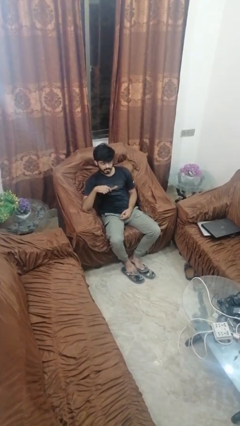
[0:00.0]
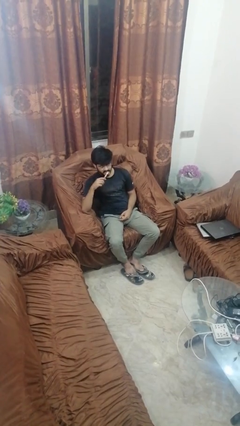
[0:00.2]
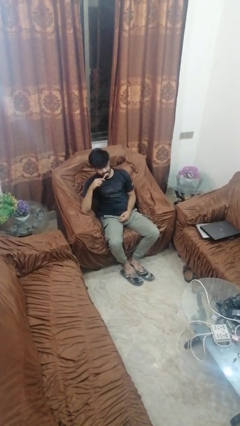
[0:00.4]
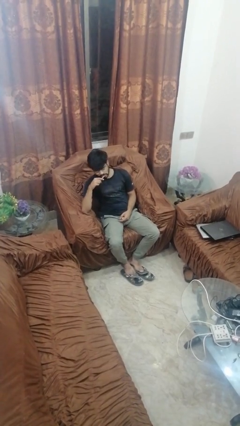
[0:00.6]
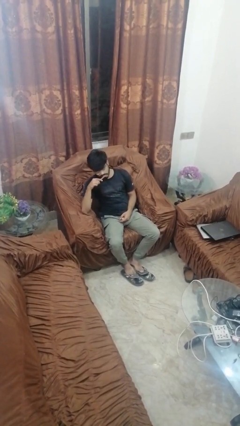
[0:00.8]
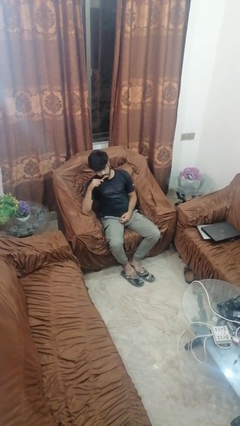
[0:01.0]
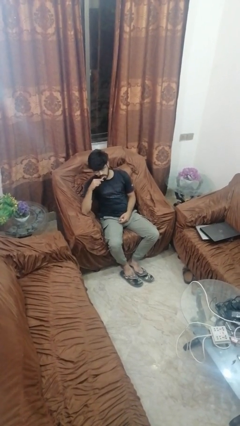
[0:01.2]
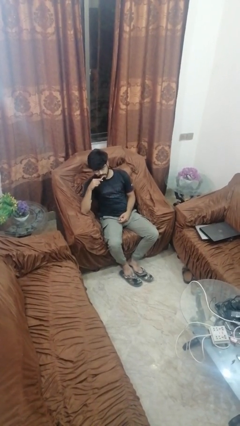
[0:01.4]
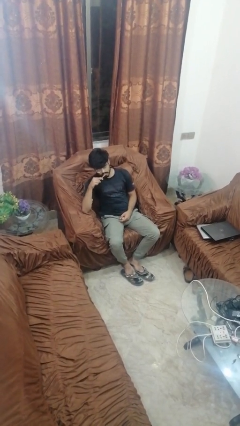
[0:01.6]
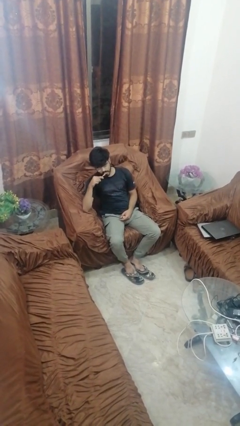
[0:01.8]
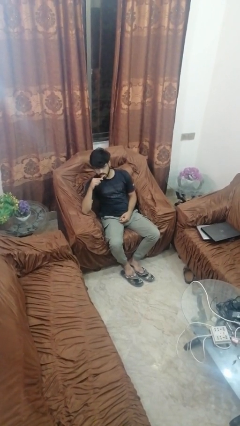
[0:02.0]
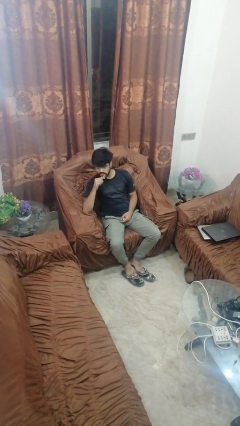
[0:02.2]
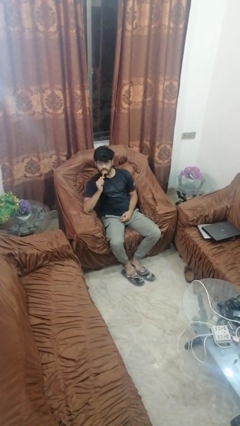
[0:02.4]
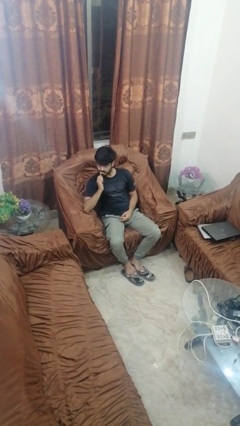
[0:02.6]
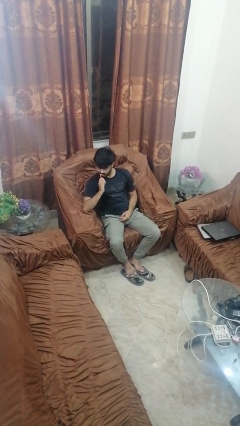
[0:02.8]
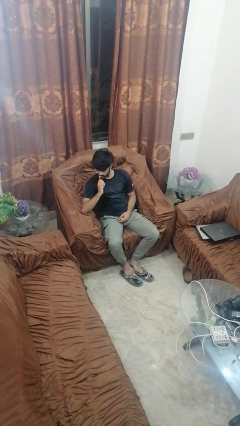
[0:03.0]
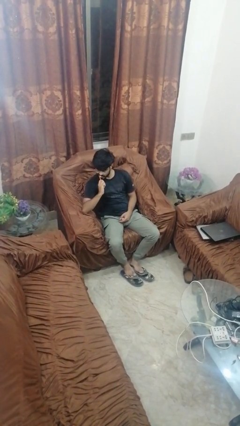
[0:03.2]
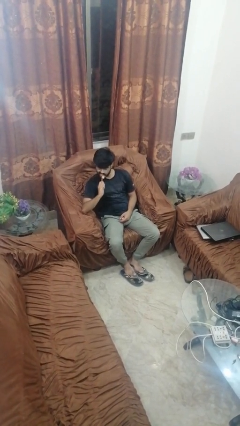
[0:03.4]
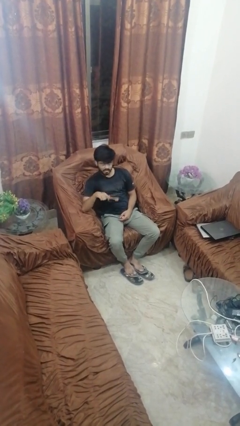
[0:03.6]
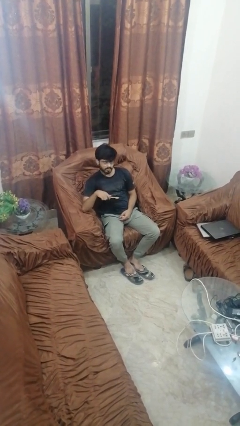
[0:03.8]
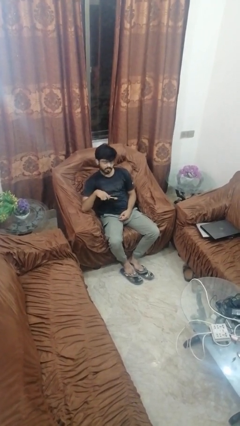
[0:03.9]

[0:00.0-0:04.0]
person brushes teeth

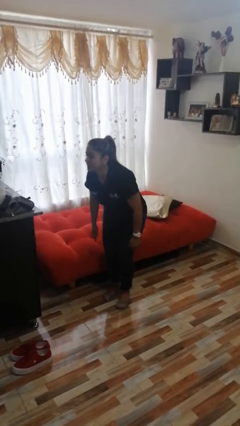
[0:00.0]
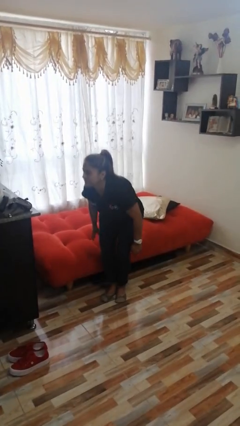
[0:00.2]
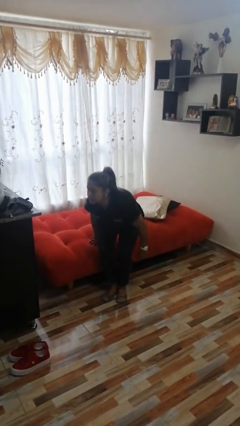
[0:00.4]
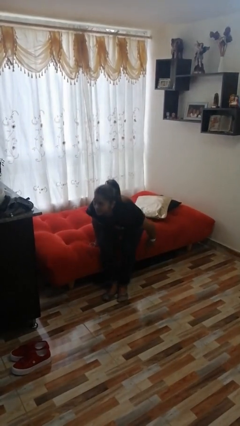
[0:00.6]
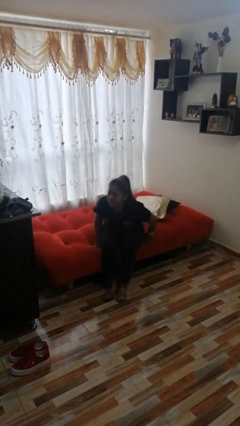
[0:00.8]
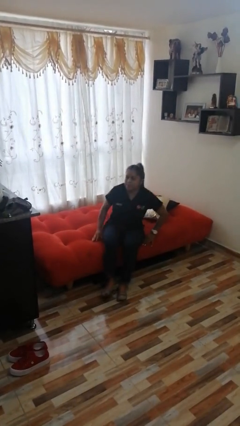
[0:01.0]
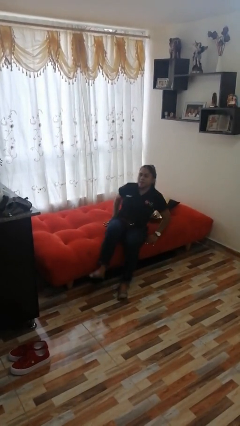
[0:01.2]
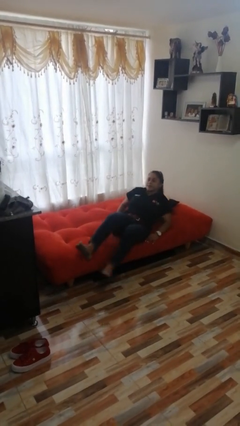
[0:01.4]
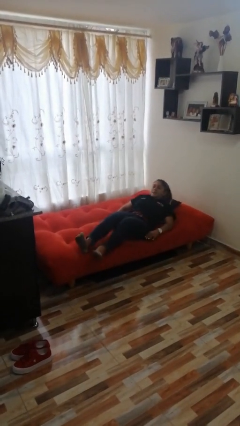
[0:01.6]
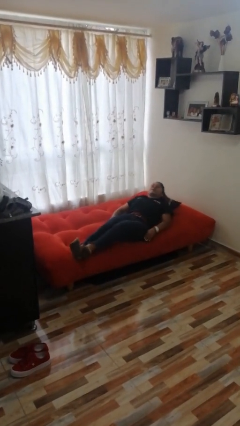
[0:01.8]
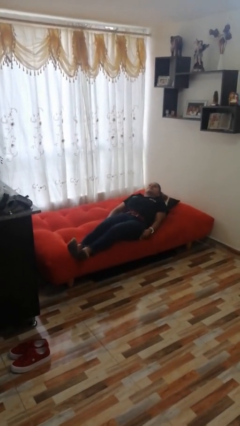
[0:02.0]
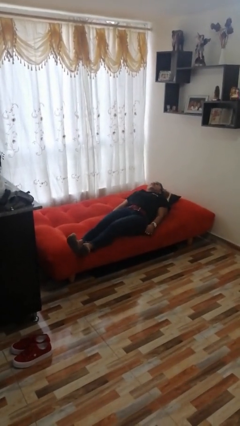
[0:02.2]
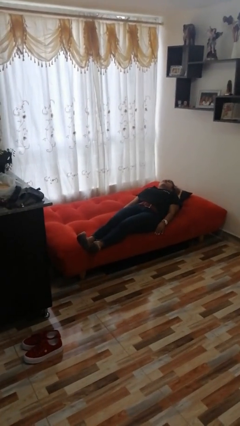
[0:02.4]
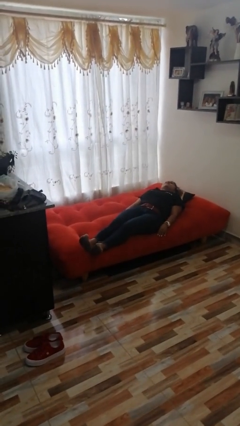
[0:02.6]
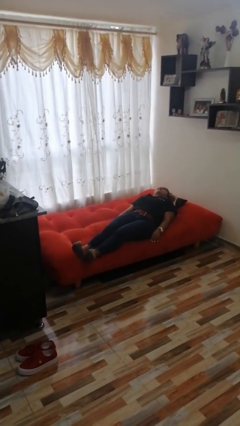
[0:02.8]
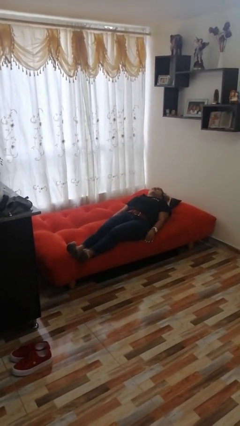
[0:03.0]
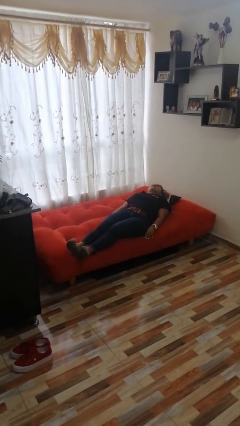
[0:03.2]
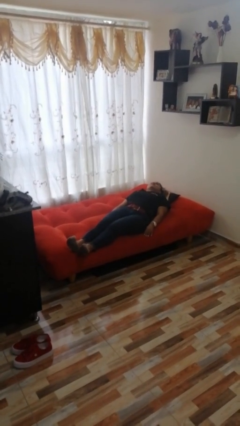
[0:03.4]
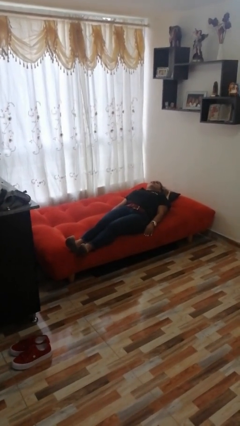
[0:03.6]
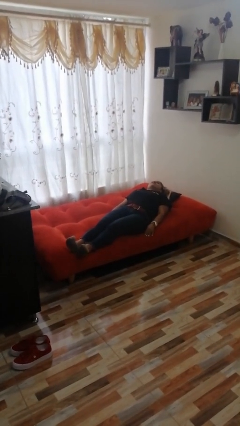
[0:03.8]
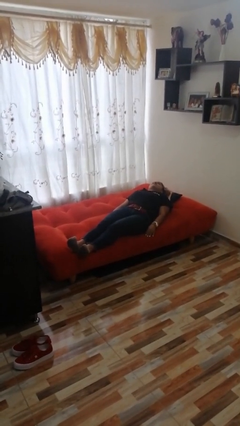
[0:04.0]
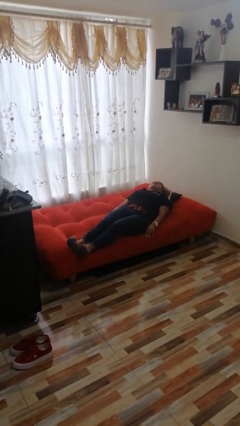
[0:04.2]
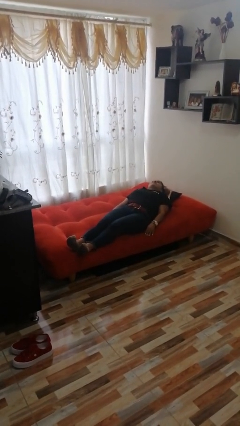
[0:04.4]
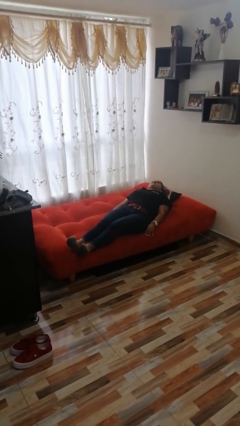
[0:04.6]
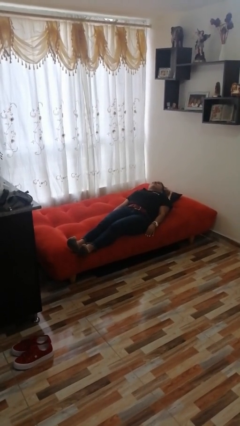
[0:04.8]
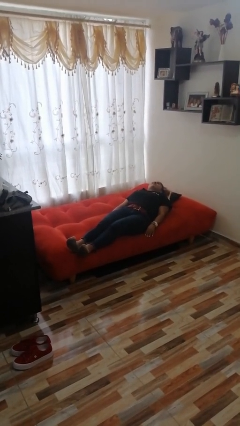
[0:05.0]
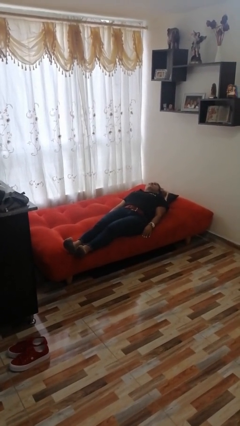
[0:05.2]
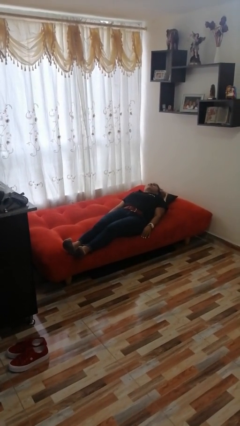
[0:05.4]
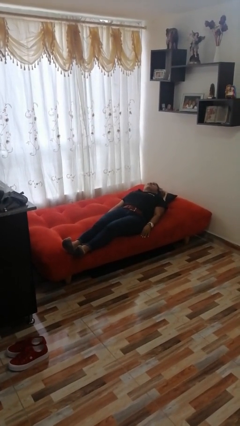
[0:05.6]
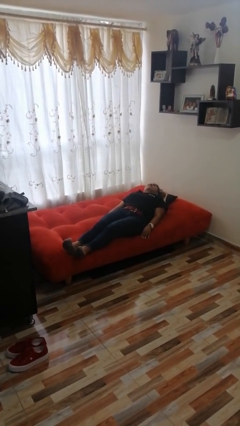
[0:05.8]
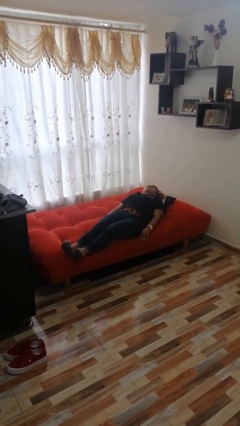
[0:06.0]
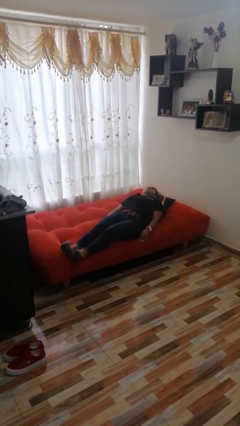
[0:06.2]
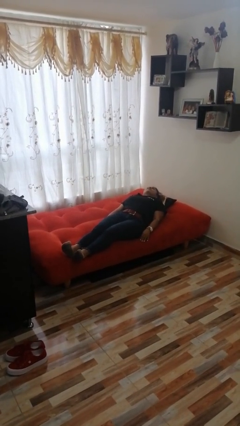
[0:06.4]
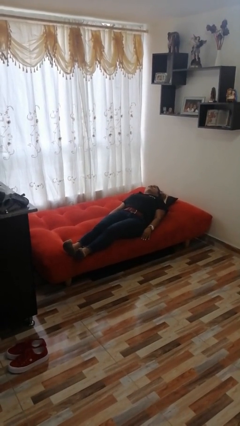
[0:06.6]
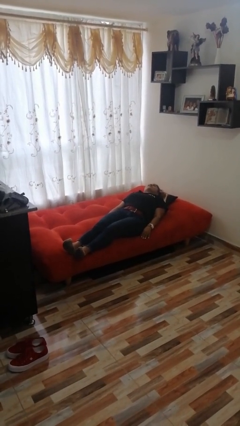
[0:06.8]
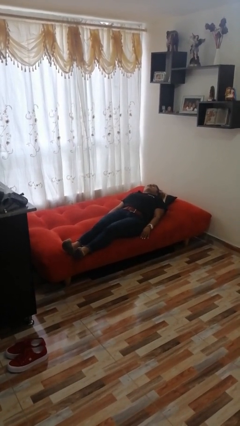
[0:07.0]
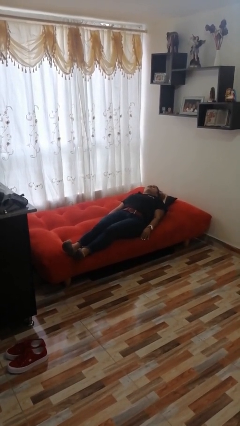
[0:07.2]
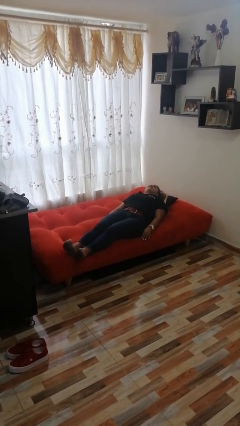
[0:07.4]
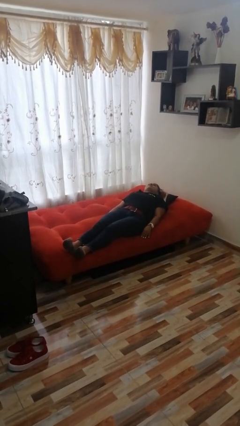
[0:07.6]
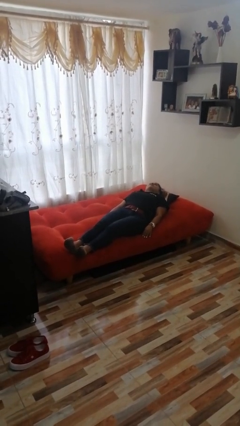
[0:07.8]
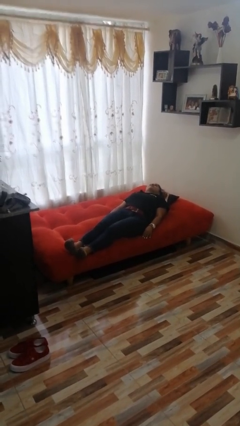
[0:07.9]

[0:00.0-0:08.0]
person lies down on bed

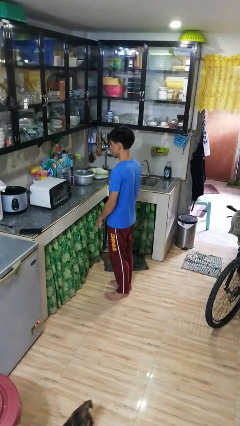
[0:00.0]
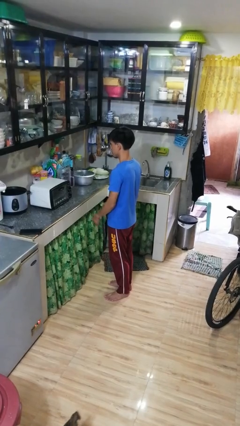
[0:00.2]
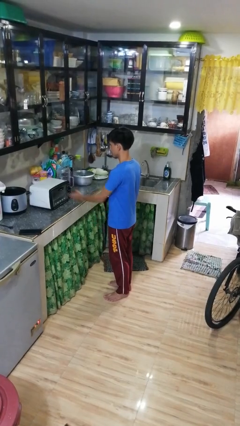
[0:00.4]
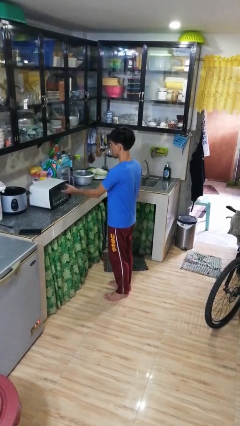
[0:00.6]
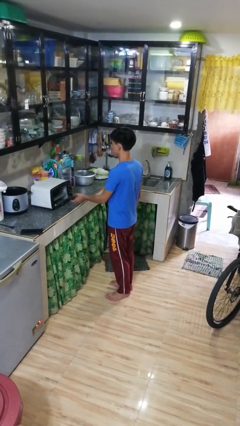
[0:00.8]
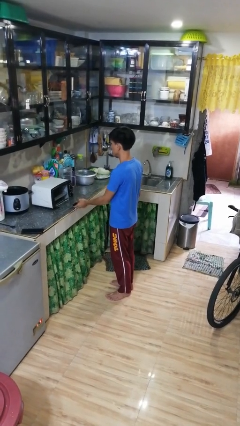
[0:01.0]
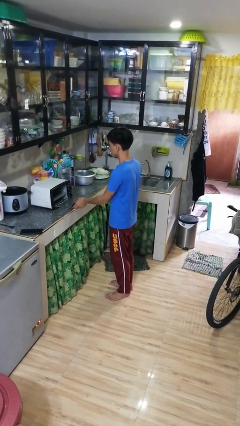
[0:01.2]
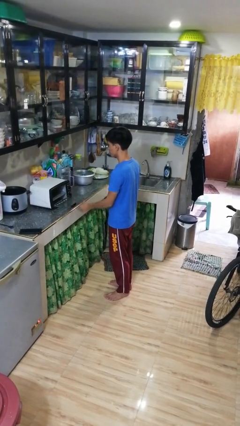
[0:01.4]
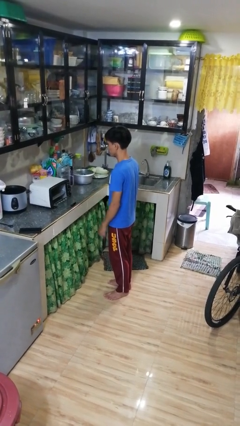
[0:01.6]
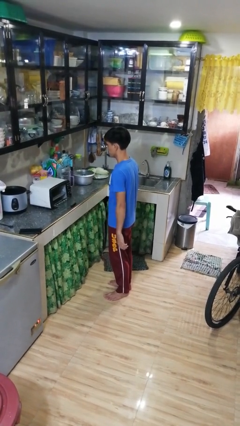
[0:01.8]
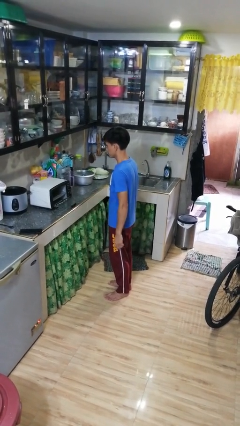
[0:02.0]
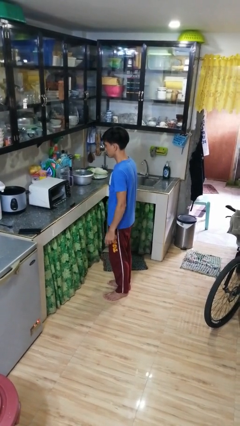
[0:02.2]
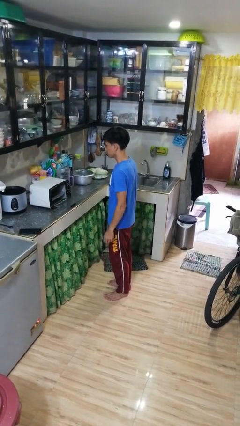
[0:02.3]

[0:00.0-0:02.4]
person opens microwave

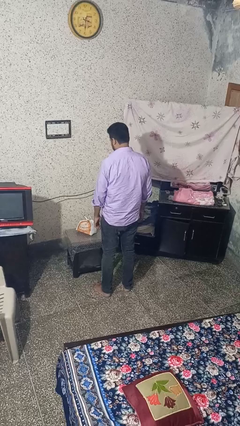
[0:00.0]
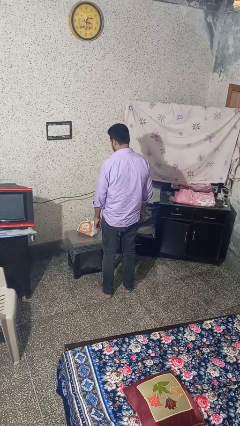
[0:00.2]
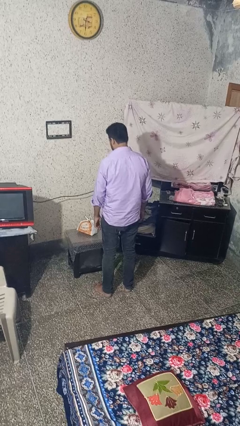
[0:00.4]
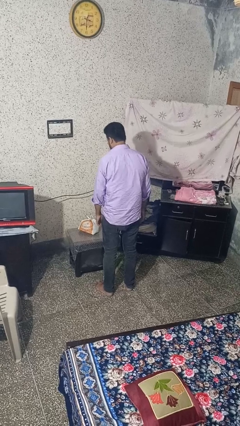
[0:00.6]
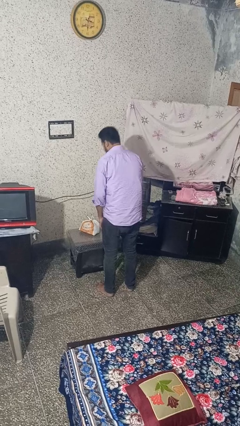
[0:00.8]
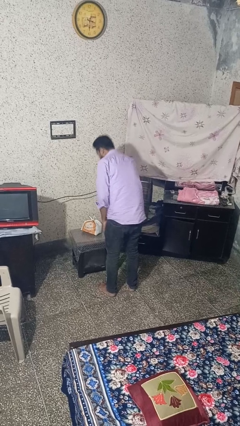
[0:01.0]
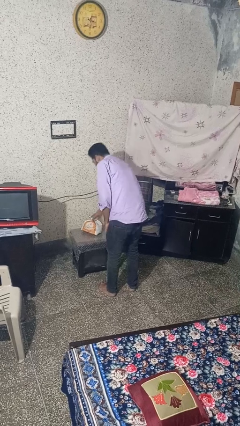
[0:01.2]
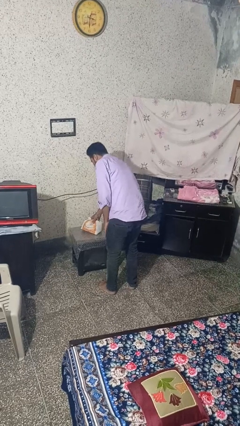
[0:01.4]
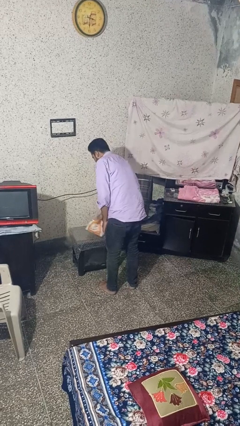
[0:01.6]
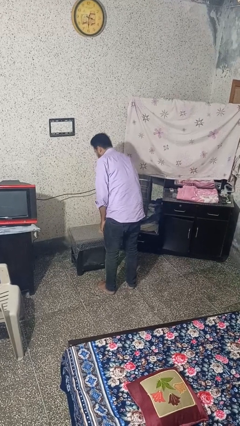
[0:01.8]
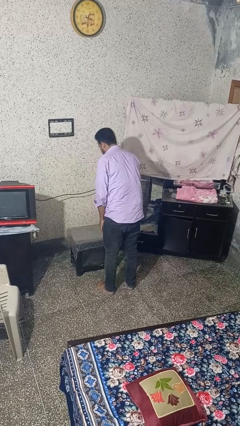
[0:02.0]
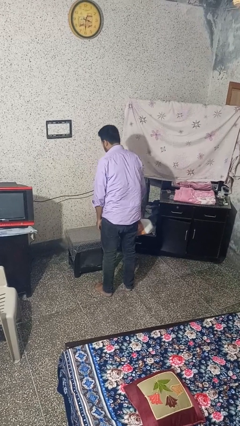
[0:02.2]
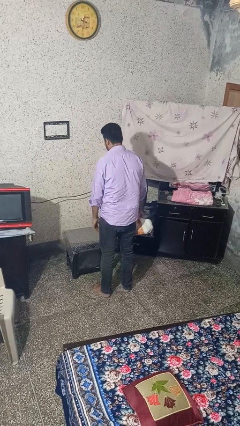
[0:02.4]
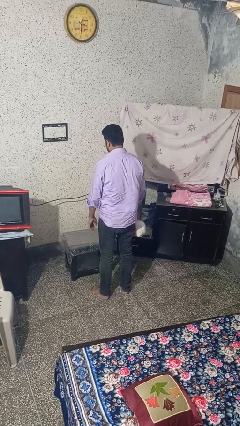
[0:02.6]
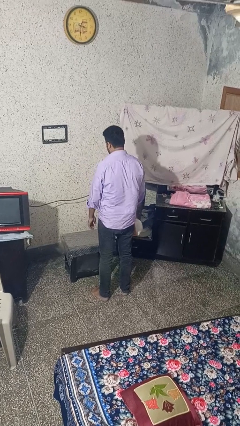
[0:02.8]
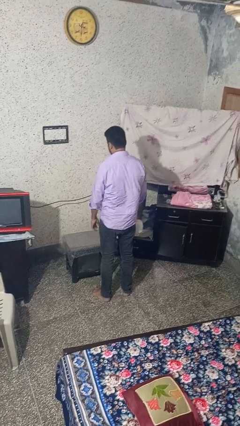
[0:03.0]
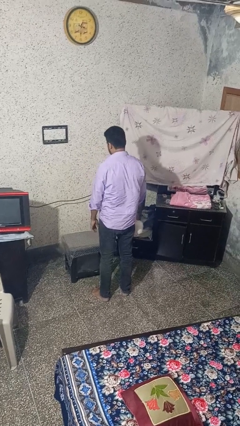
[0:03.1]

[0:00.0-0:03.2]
person picks up object from table
